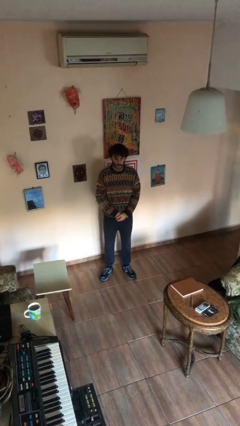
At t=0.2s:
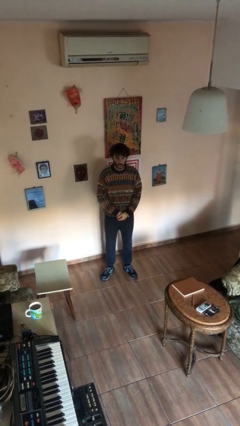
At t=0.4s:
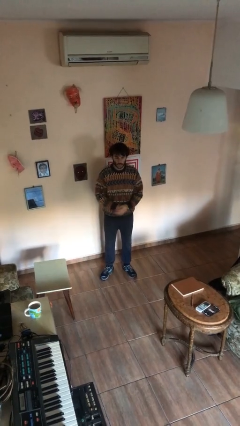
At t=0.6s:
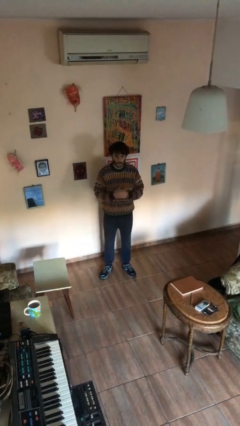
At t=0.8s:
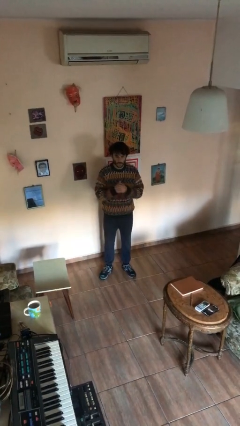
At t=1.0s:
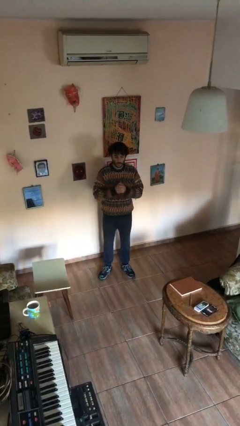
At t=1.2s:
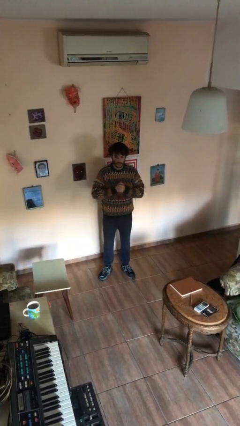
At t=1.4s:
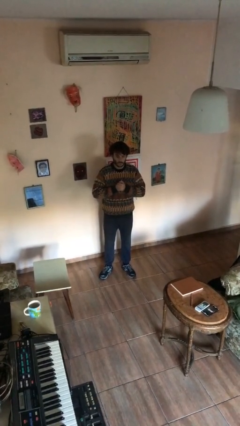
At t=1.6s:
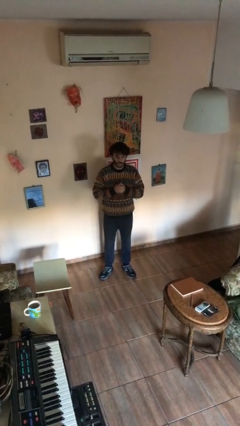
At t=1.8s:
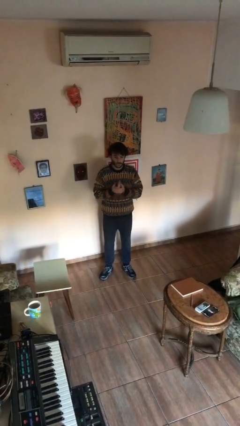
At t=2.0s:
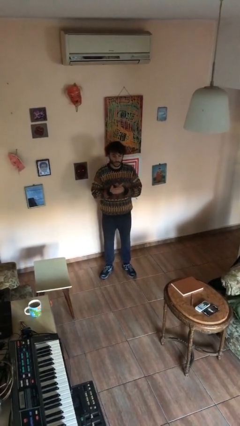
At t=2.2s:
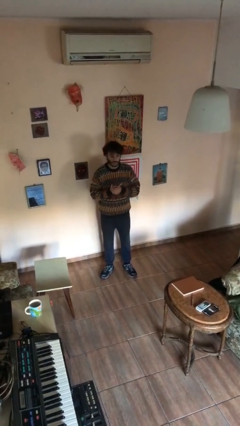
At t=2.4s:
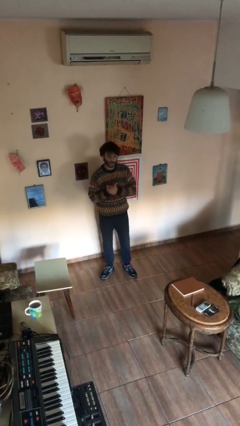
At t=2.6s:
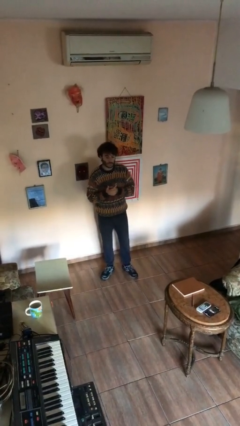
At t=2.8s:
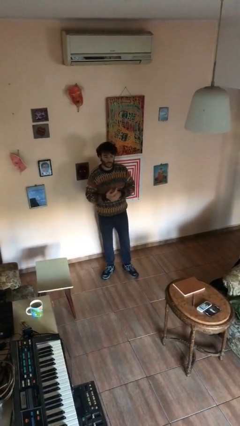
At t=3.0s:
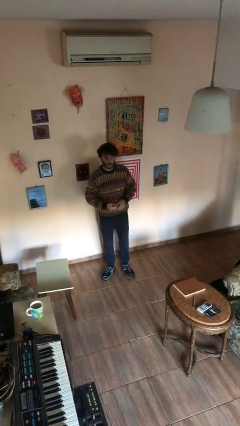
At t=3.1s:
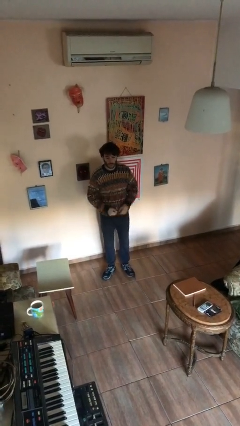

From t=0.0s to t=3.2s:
person cracks knuckles

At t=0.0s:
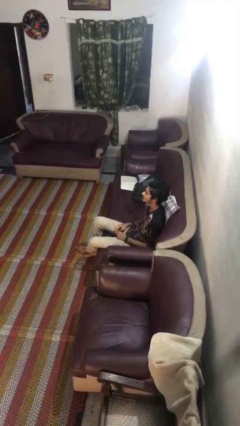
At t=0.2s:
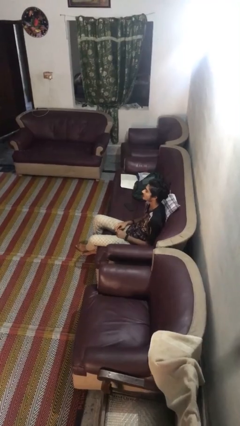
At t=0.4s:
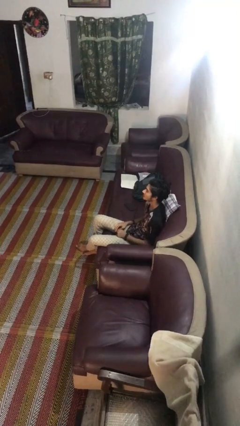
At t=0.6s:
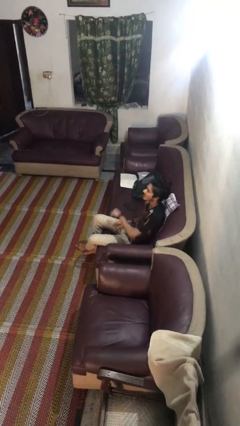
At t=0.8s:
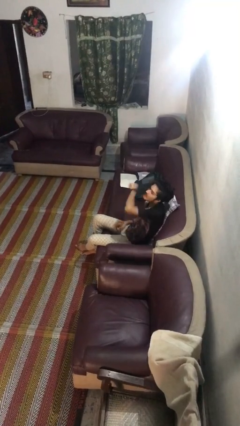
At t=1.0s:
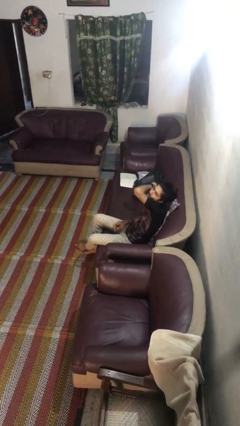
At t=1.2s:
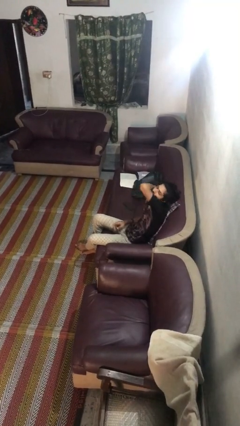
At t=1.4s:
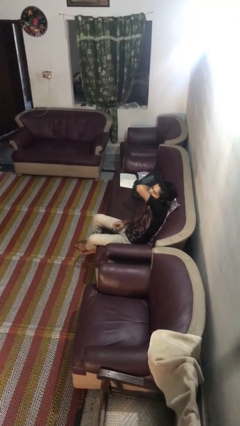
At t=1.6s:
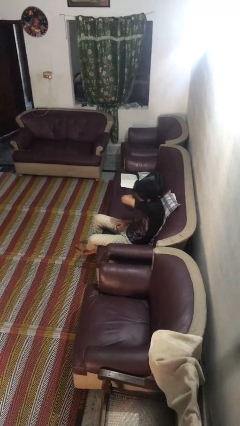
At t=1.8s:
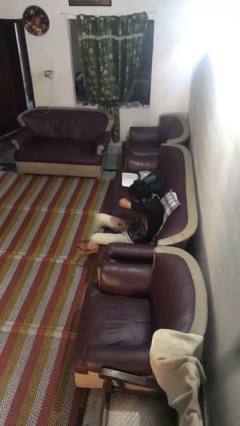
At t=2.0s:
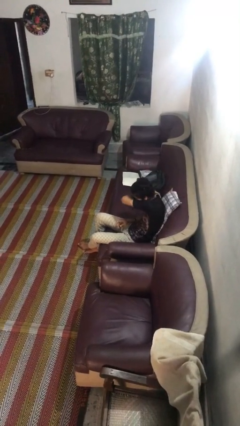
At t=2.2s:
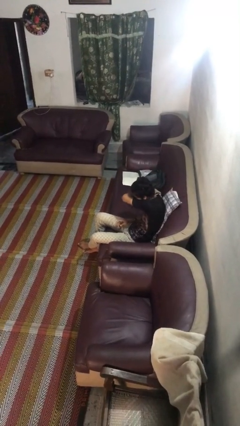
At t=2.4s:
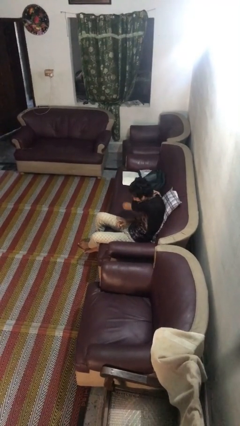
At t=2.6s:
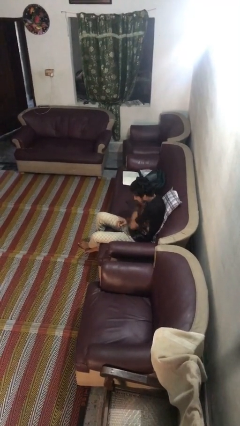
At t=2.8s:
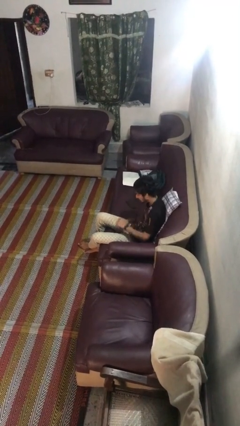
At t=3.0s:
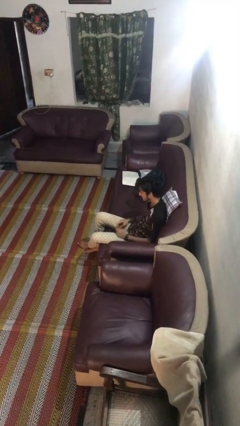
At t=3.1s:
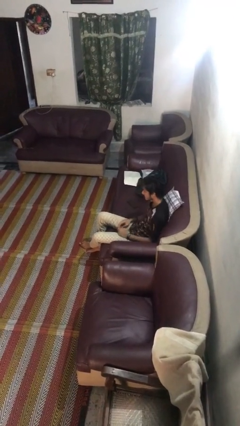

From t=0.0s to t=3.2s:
person sneezes into arm

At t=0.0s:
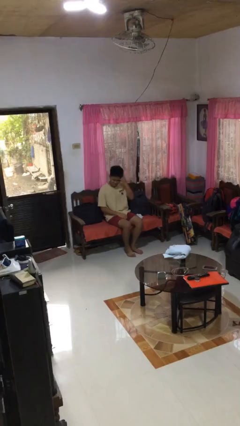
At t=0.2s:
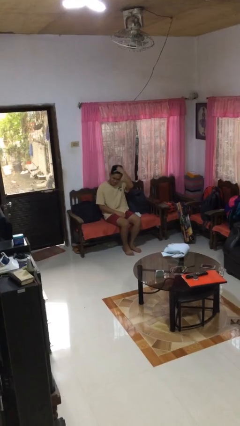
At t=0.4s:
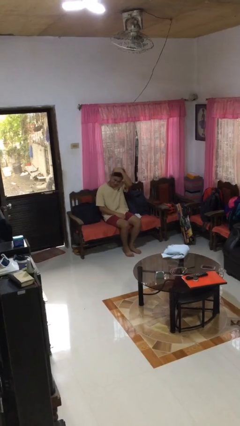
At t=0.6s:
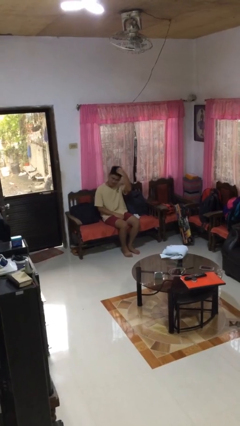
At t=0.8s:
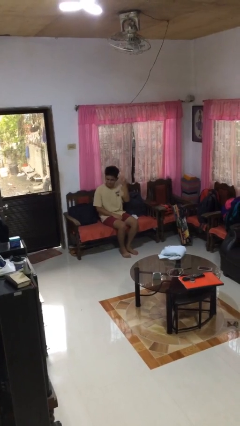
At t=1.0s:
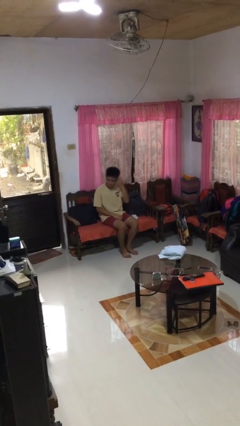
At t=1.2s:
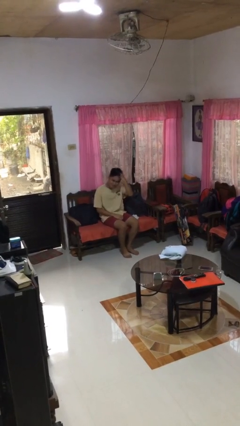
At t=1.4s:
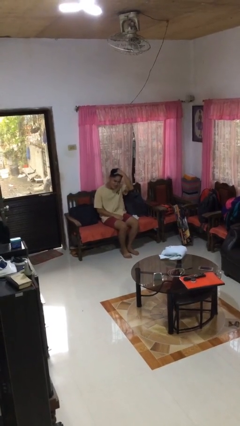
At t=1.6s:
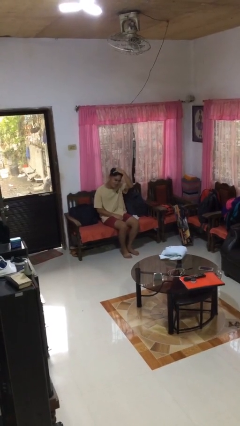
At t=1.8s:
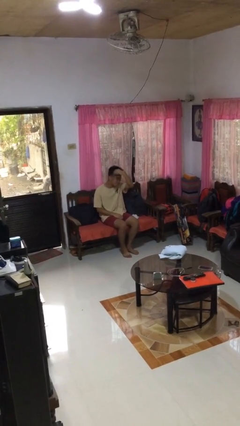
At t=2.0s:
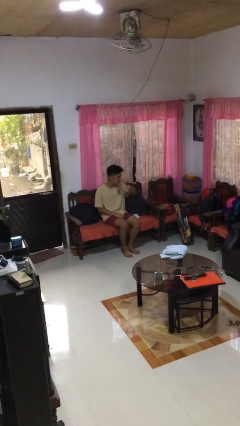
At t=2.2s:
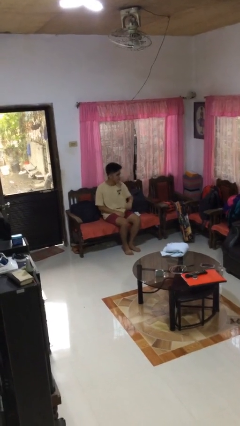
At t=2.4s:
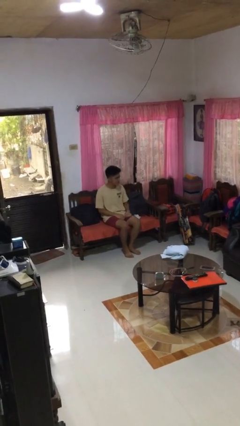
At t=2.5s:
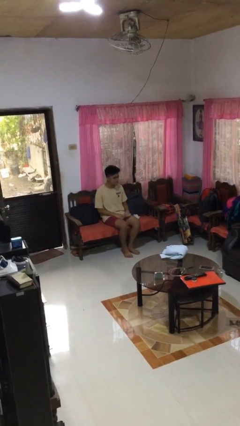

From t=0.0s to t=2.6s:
person strokes hair

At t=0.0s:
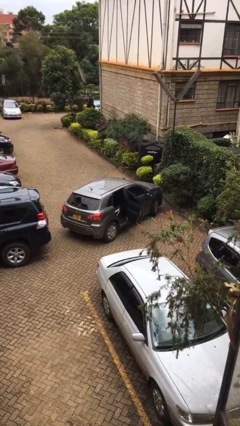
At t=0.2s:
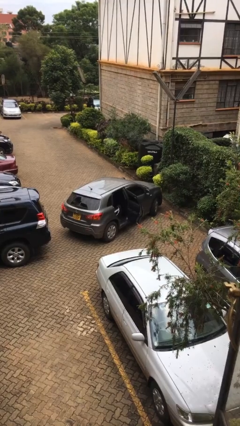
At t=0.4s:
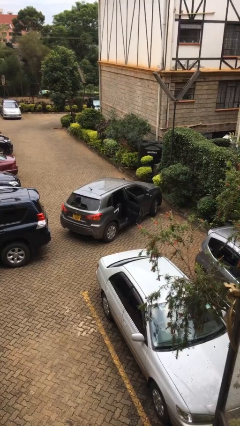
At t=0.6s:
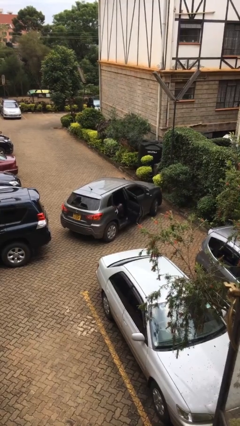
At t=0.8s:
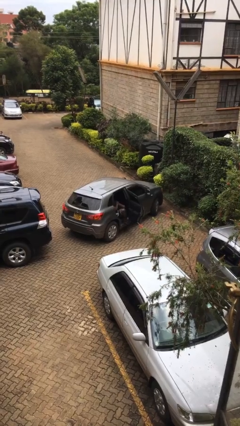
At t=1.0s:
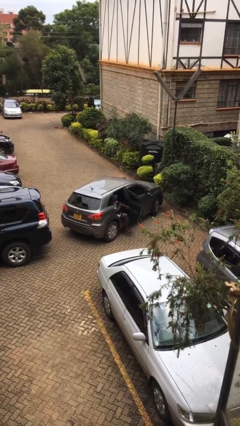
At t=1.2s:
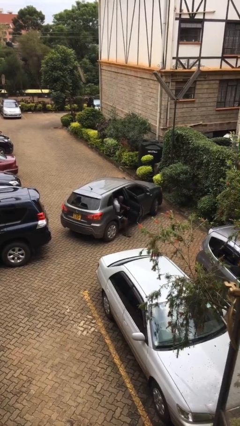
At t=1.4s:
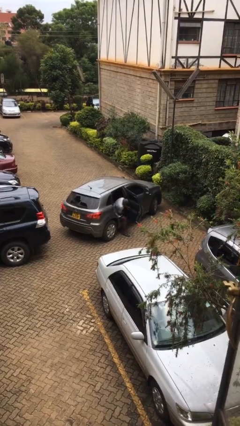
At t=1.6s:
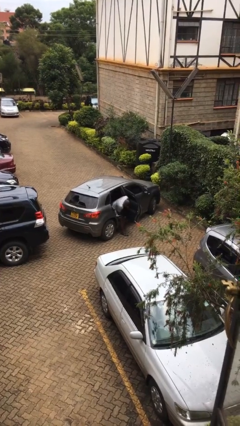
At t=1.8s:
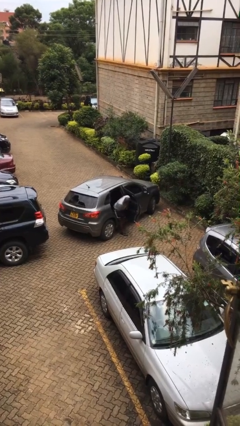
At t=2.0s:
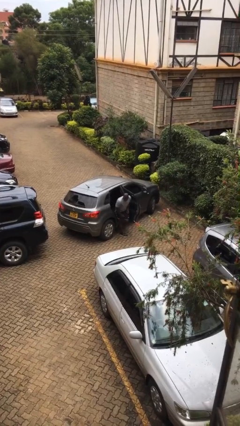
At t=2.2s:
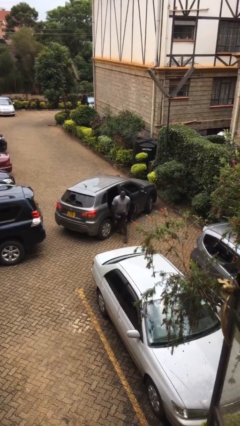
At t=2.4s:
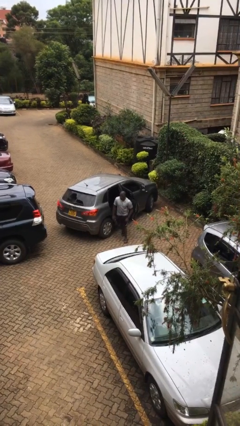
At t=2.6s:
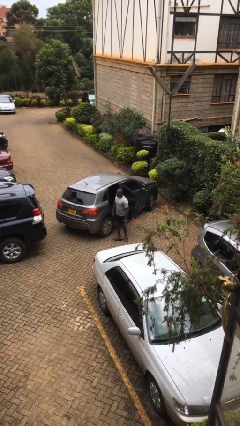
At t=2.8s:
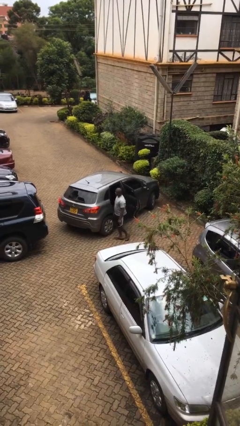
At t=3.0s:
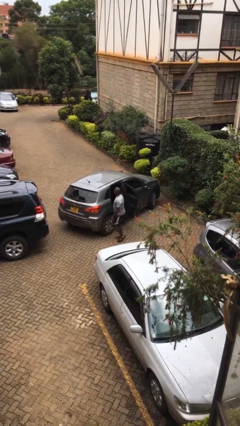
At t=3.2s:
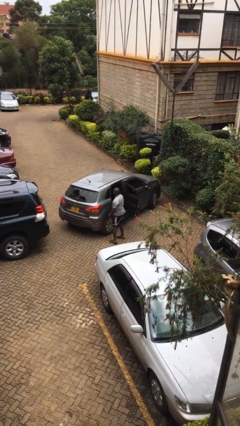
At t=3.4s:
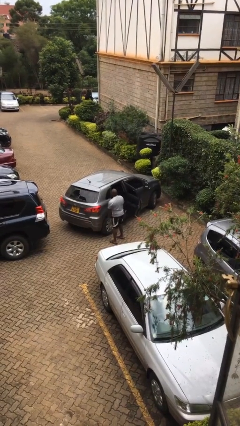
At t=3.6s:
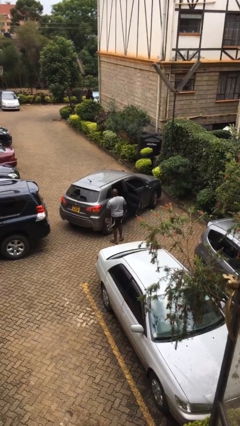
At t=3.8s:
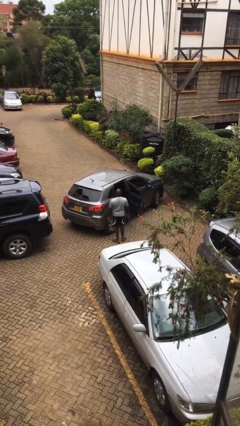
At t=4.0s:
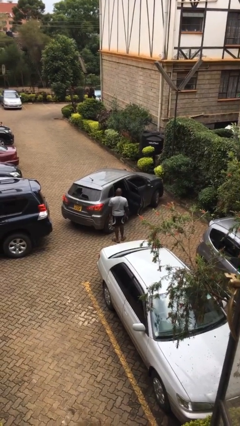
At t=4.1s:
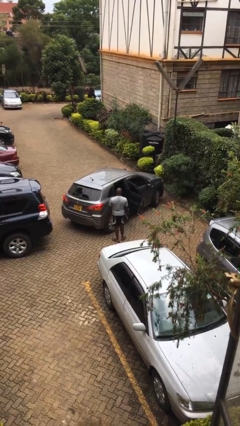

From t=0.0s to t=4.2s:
person exits car

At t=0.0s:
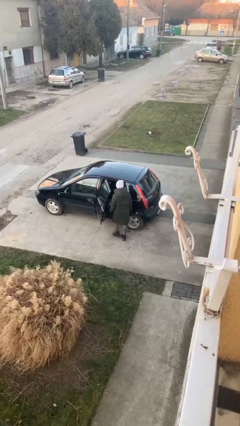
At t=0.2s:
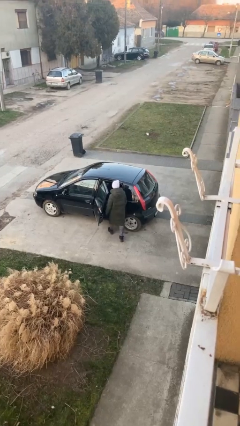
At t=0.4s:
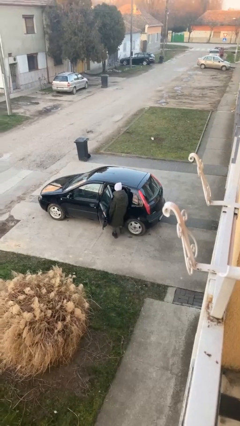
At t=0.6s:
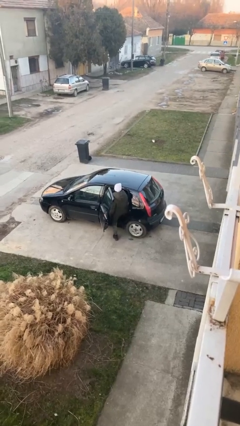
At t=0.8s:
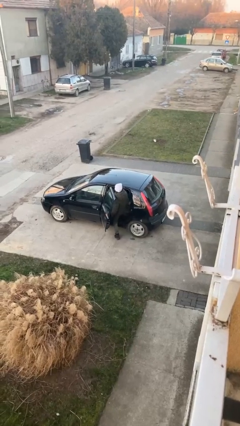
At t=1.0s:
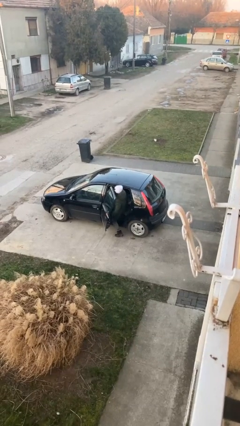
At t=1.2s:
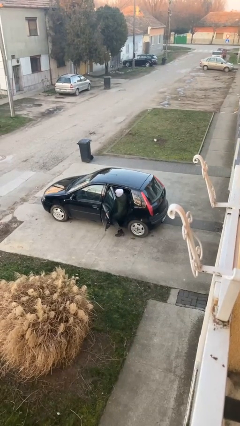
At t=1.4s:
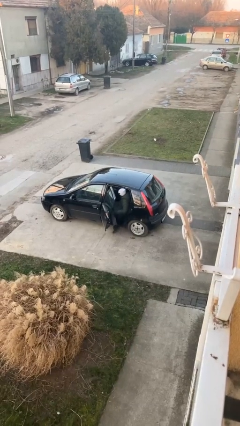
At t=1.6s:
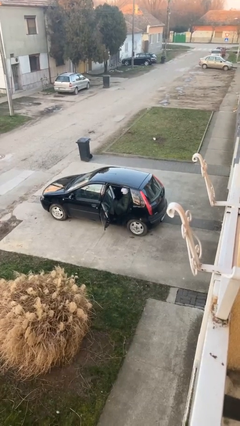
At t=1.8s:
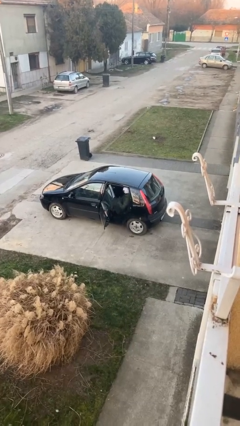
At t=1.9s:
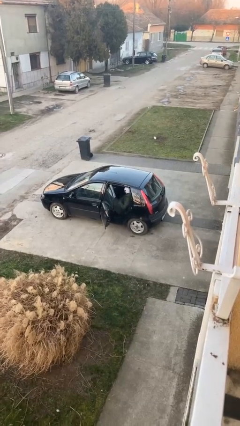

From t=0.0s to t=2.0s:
person enters car

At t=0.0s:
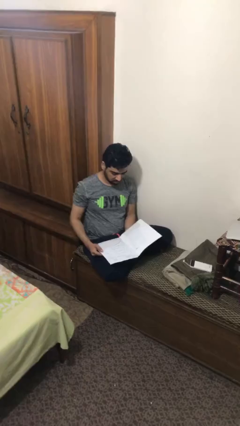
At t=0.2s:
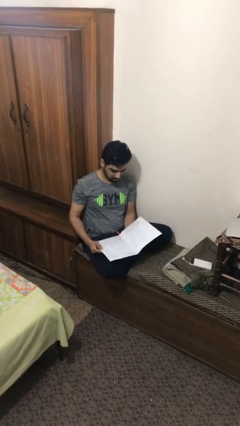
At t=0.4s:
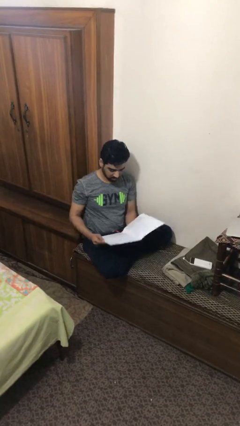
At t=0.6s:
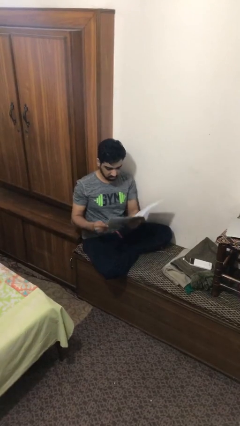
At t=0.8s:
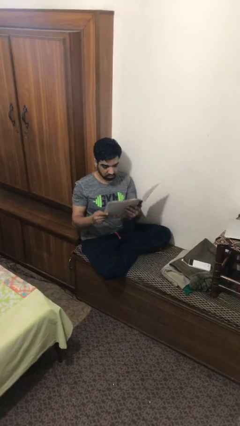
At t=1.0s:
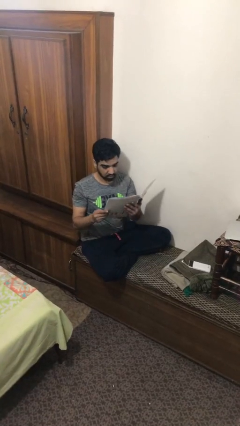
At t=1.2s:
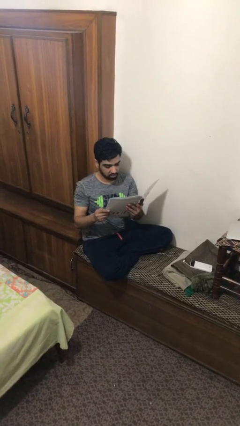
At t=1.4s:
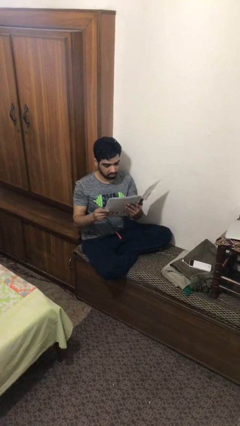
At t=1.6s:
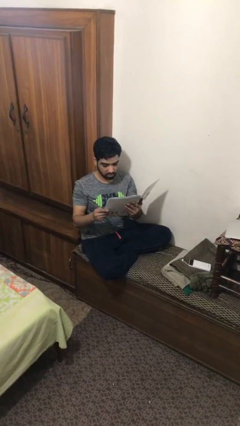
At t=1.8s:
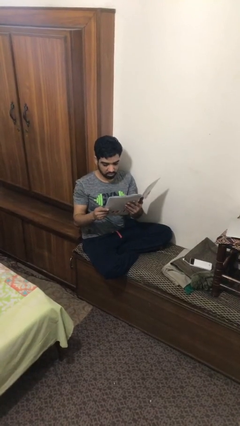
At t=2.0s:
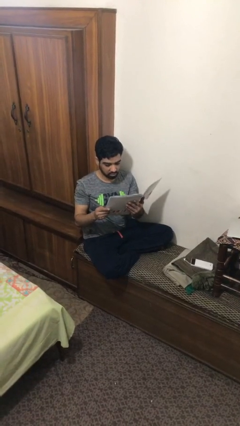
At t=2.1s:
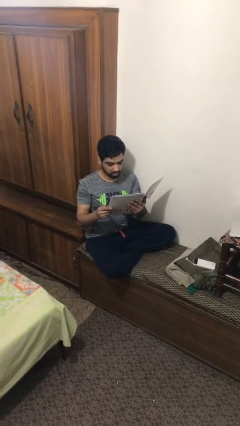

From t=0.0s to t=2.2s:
person reads document

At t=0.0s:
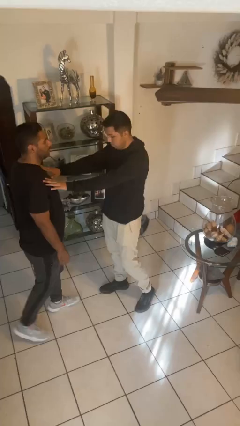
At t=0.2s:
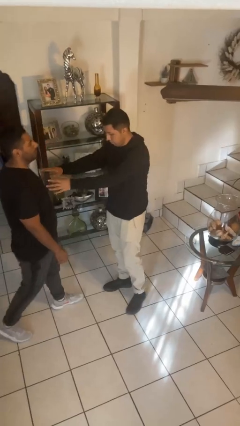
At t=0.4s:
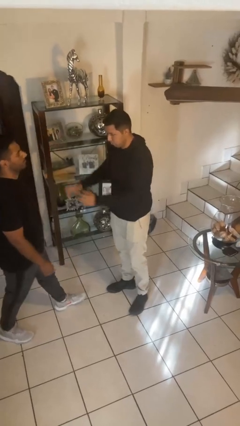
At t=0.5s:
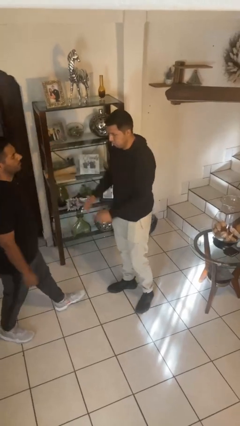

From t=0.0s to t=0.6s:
person shoves person
